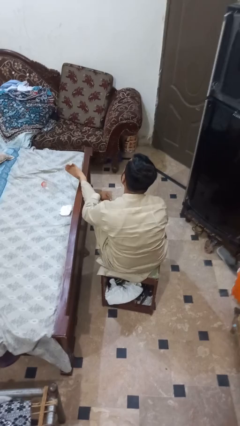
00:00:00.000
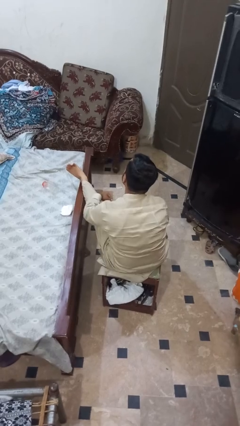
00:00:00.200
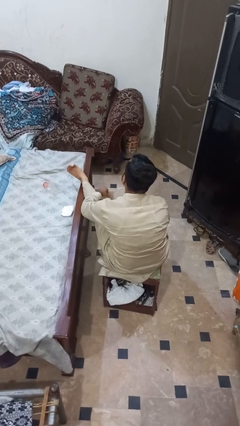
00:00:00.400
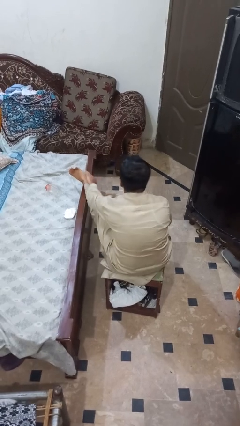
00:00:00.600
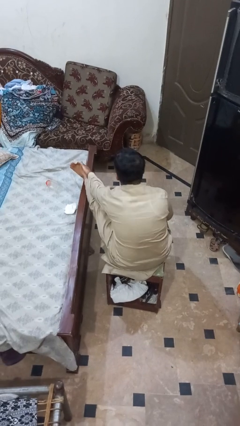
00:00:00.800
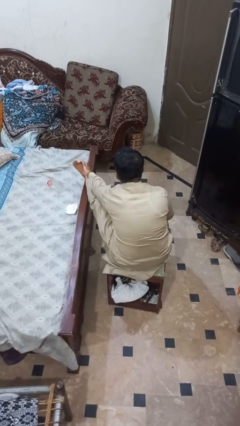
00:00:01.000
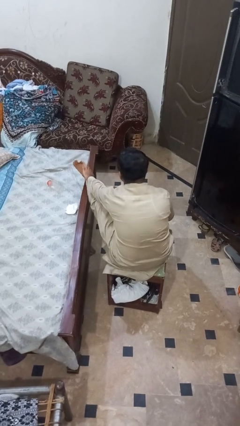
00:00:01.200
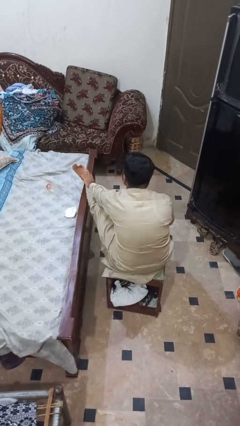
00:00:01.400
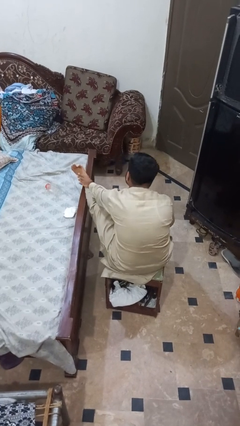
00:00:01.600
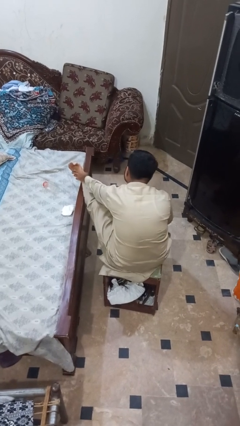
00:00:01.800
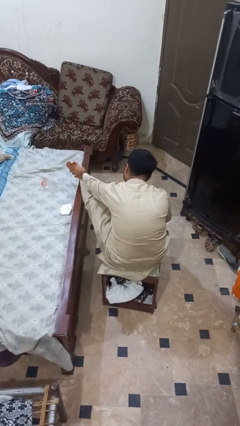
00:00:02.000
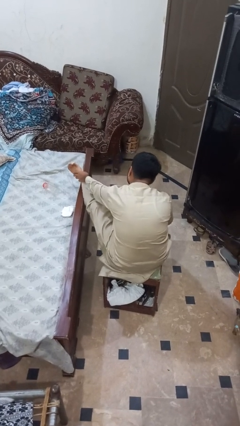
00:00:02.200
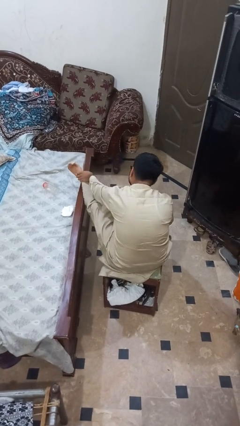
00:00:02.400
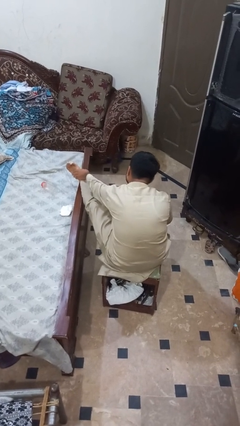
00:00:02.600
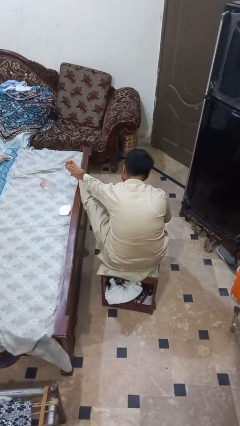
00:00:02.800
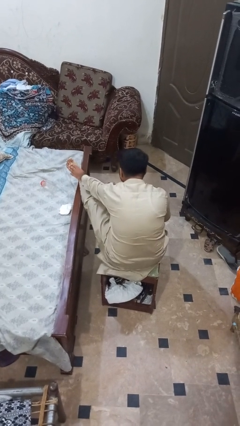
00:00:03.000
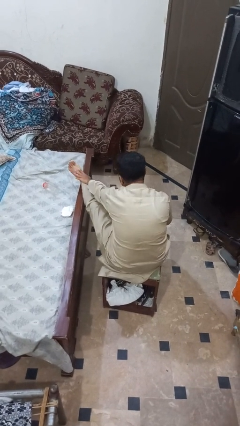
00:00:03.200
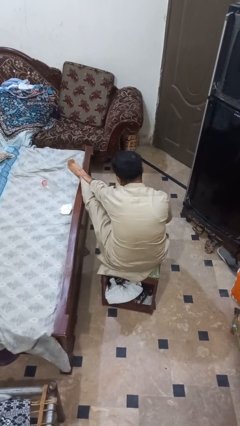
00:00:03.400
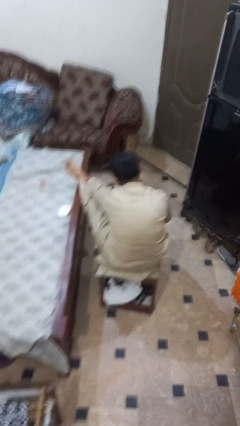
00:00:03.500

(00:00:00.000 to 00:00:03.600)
person rubs foot

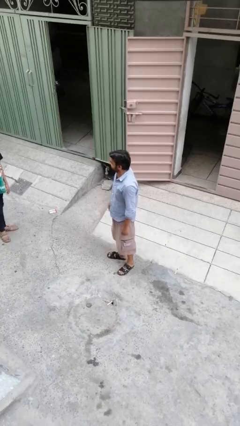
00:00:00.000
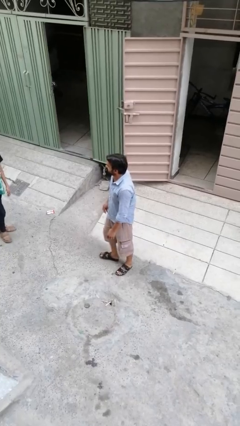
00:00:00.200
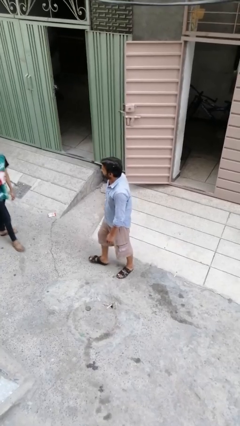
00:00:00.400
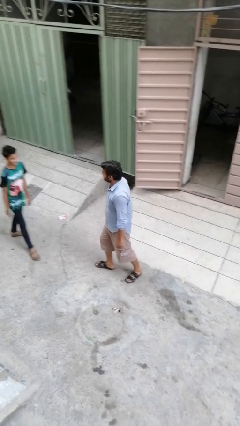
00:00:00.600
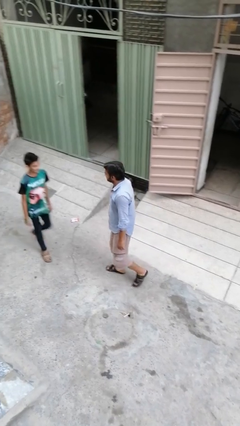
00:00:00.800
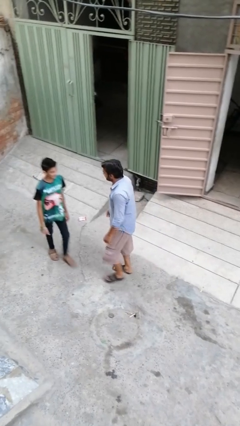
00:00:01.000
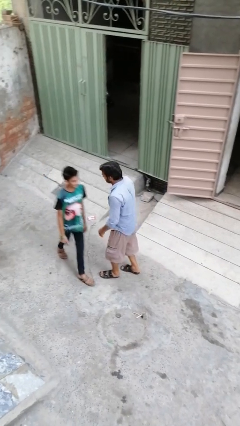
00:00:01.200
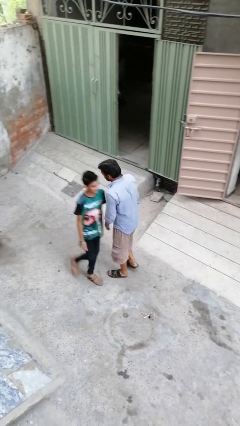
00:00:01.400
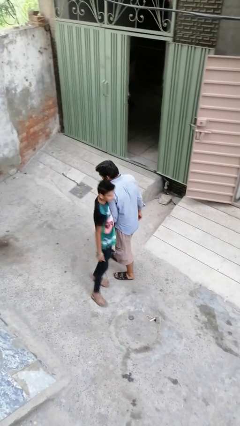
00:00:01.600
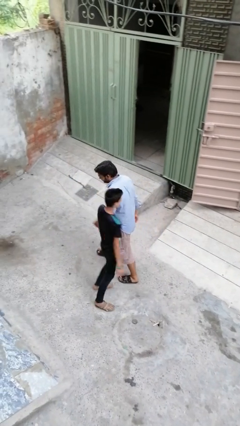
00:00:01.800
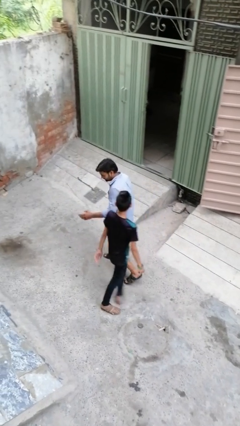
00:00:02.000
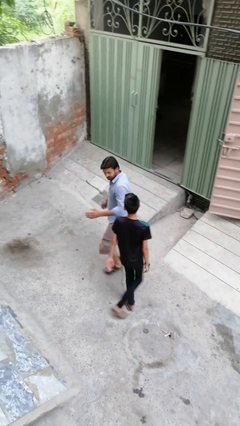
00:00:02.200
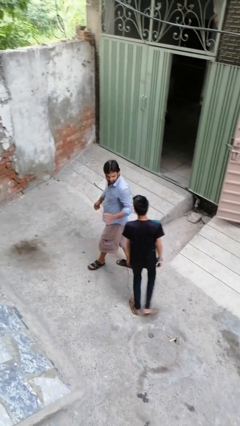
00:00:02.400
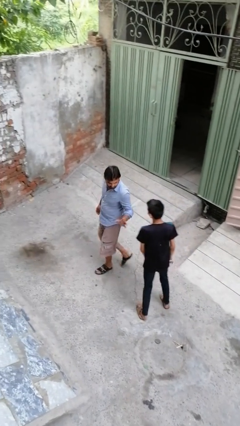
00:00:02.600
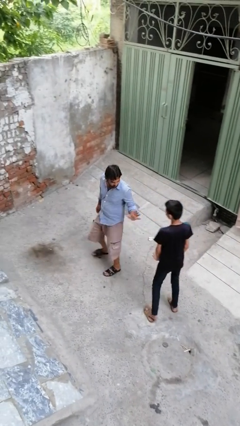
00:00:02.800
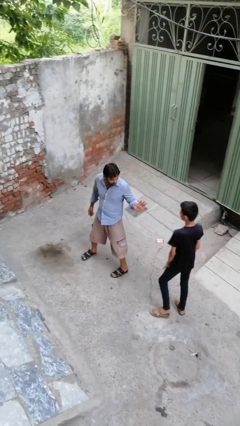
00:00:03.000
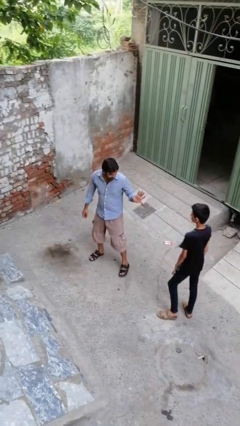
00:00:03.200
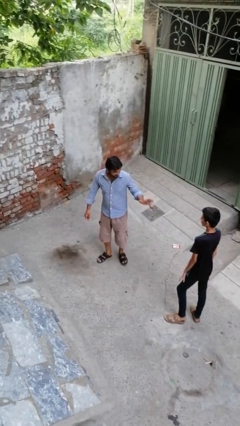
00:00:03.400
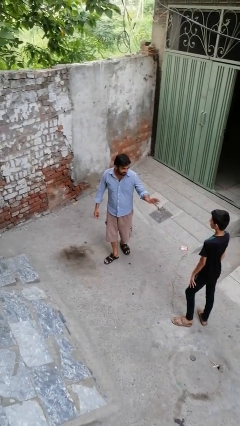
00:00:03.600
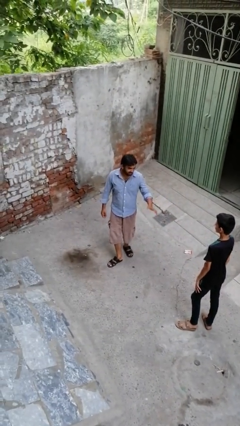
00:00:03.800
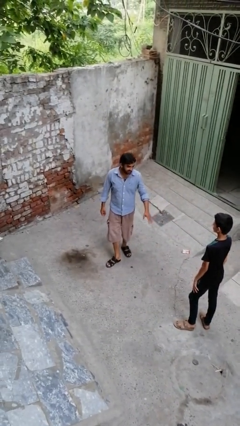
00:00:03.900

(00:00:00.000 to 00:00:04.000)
person bumps into person

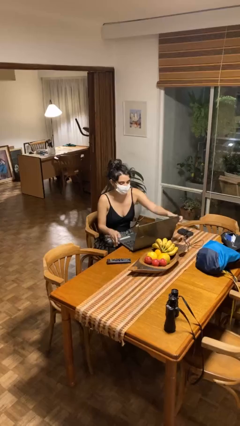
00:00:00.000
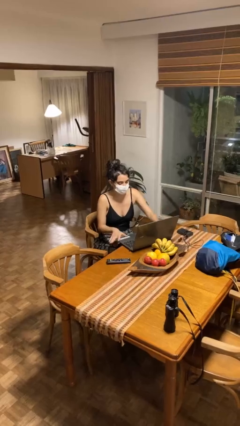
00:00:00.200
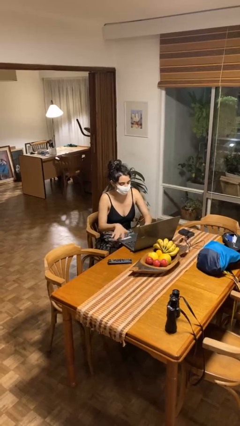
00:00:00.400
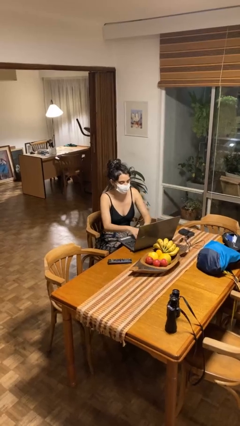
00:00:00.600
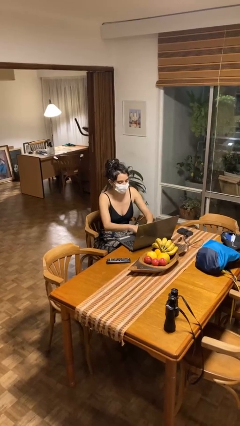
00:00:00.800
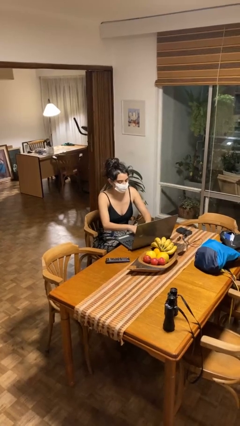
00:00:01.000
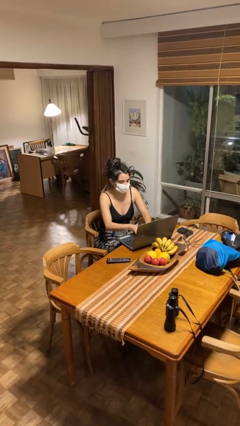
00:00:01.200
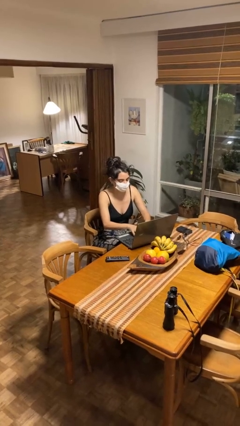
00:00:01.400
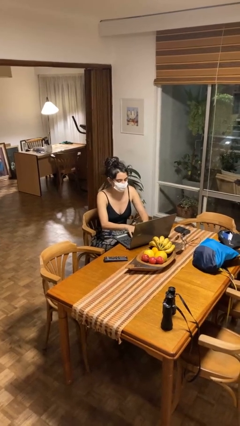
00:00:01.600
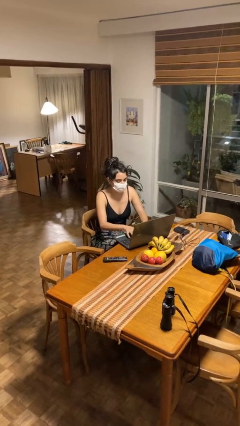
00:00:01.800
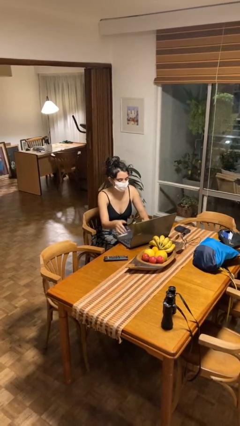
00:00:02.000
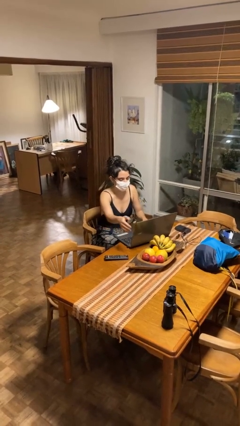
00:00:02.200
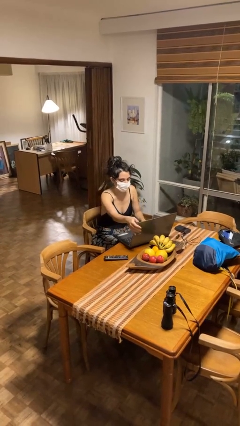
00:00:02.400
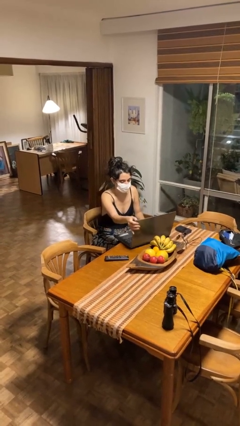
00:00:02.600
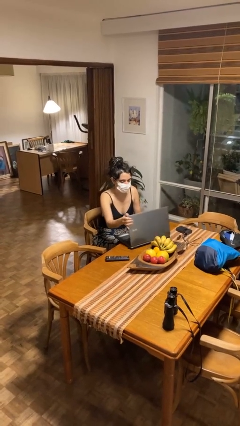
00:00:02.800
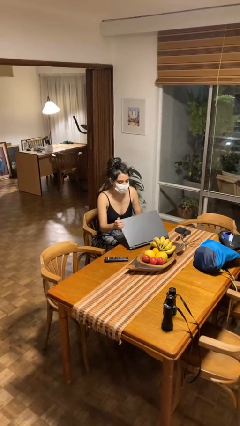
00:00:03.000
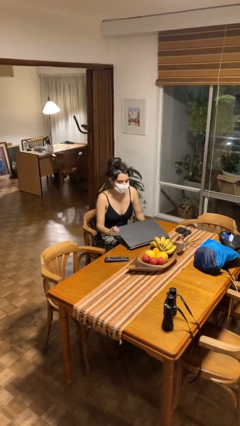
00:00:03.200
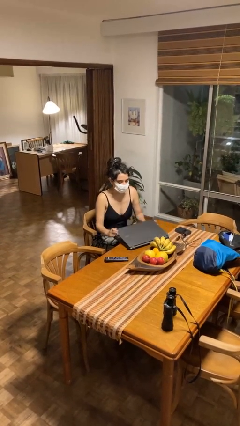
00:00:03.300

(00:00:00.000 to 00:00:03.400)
person interacts with laptop

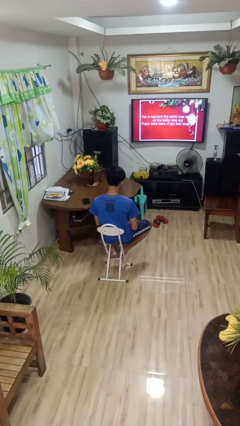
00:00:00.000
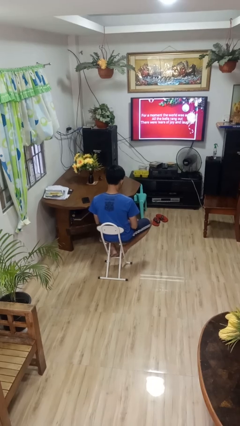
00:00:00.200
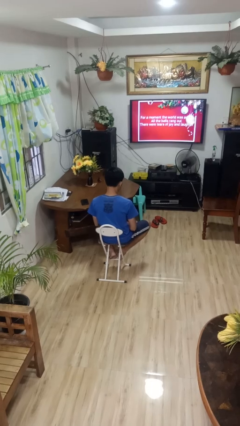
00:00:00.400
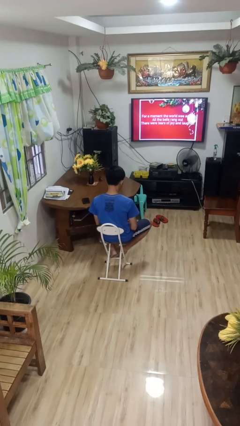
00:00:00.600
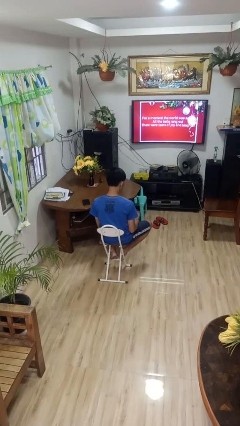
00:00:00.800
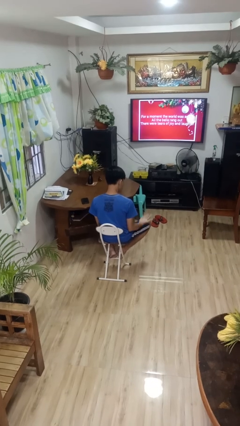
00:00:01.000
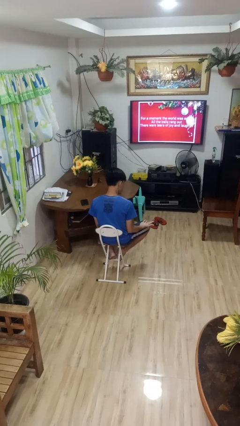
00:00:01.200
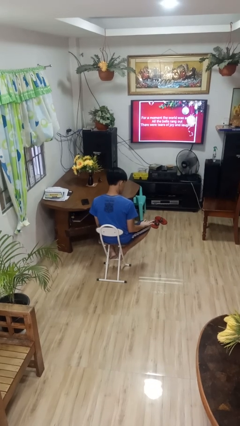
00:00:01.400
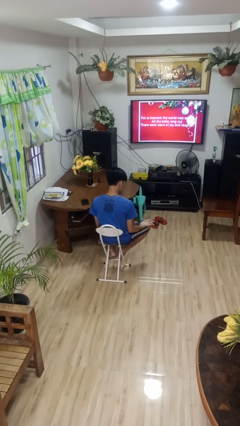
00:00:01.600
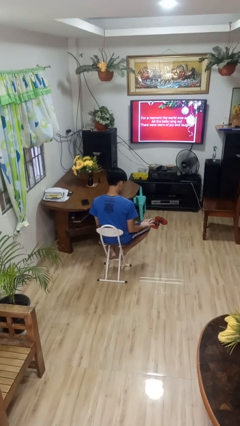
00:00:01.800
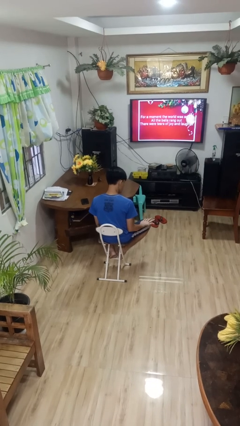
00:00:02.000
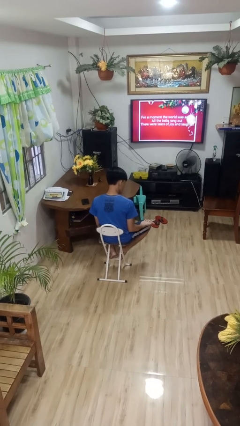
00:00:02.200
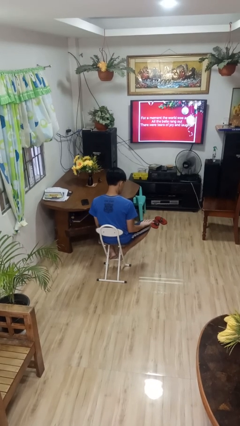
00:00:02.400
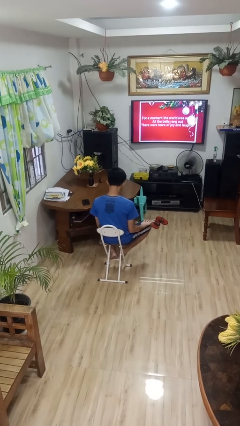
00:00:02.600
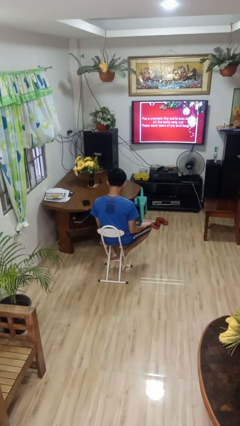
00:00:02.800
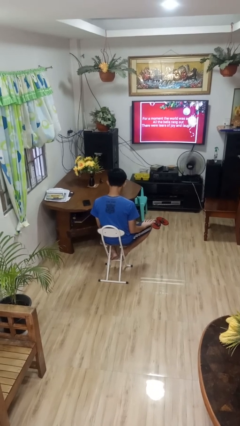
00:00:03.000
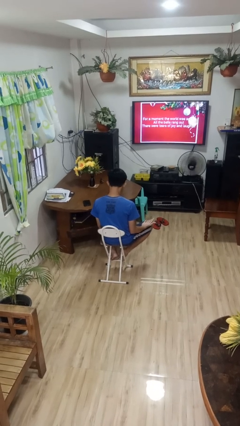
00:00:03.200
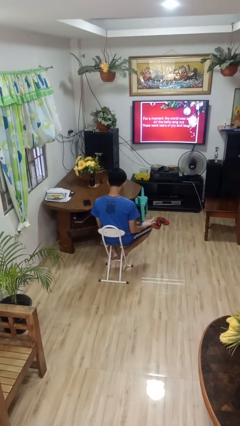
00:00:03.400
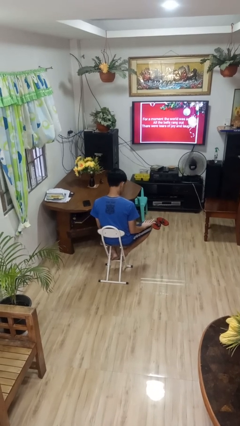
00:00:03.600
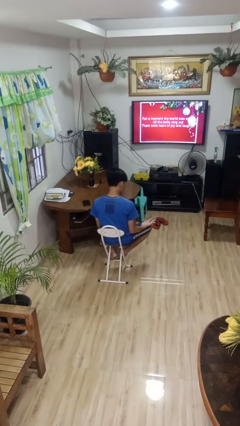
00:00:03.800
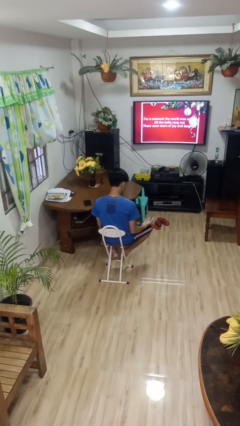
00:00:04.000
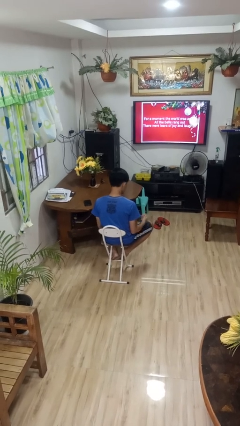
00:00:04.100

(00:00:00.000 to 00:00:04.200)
person looks at hands in lap

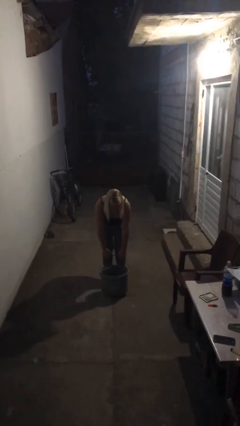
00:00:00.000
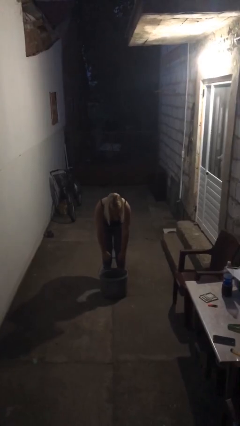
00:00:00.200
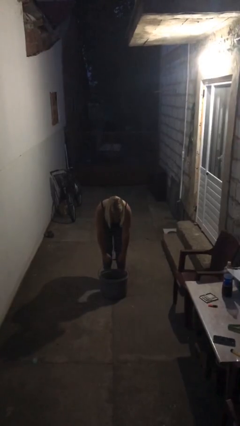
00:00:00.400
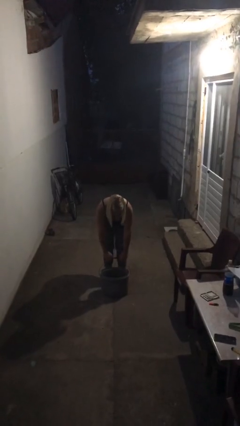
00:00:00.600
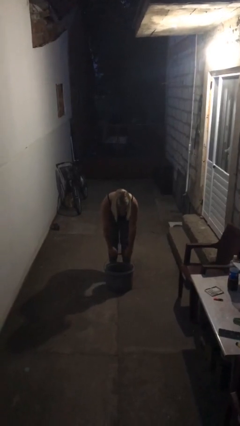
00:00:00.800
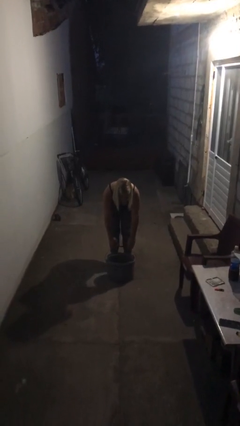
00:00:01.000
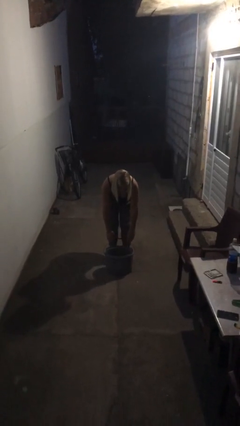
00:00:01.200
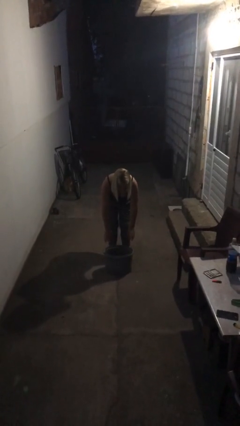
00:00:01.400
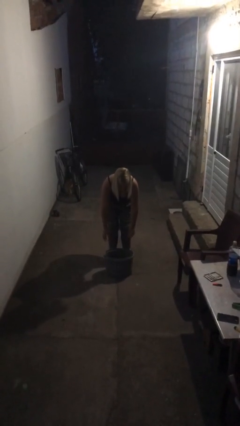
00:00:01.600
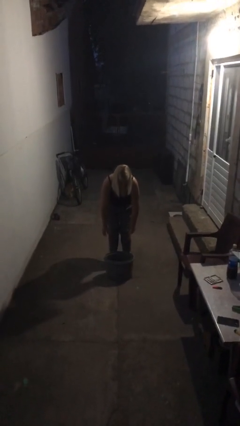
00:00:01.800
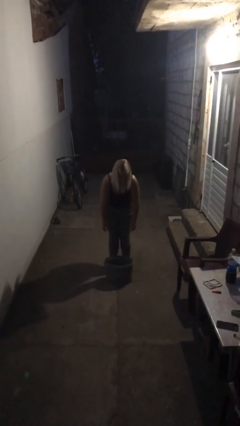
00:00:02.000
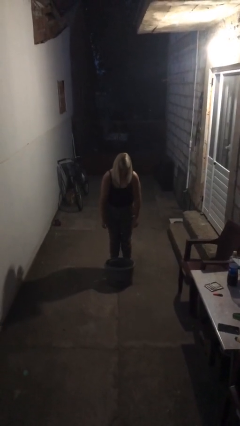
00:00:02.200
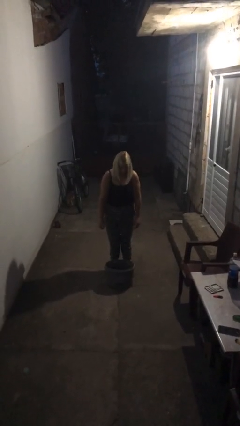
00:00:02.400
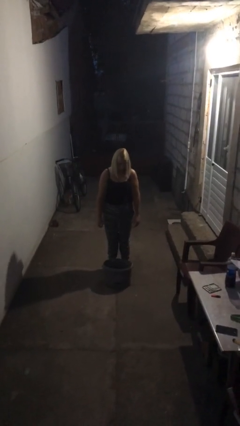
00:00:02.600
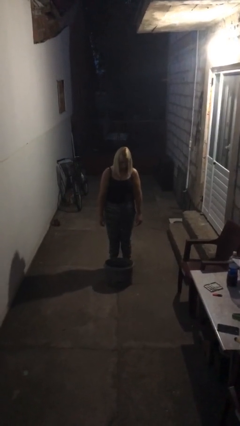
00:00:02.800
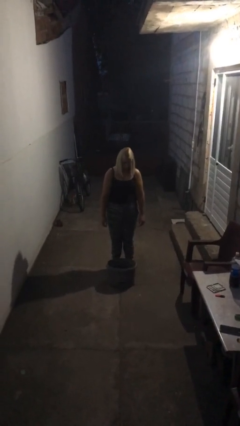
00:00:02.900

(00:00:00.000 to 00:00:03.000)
person puts down object on floor
